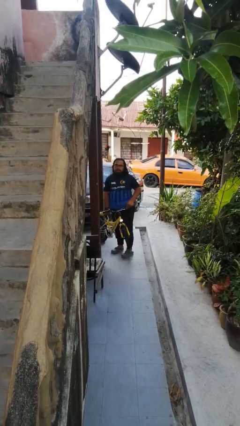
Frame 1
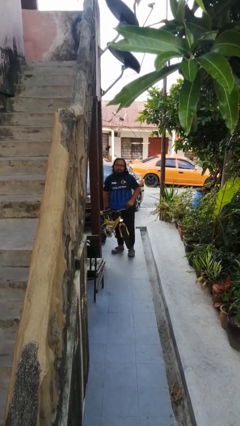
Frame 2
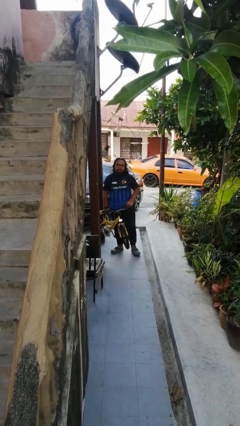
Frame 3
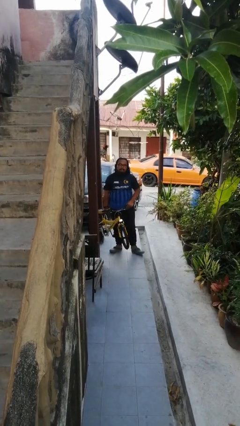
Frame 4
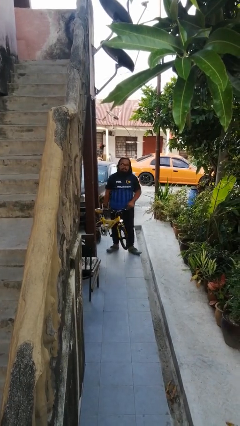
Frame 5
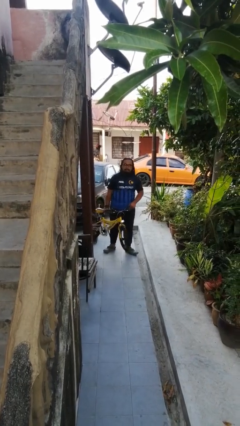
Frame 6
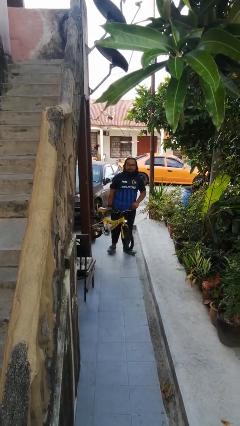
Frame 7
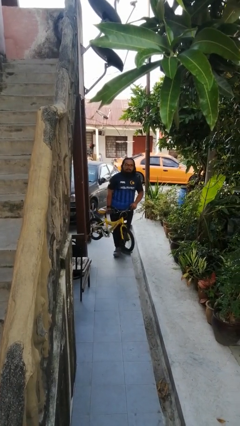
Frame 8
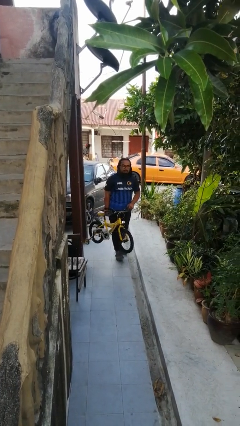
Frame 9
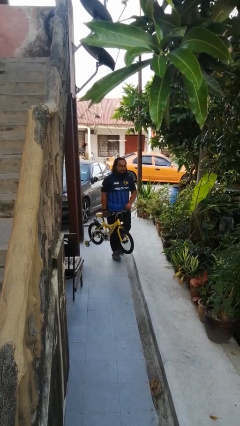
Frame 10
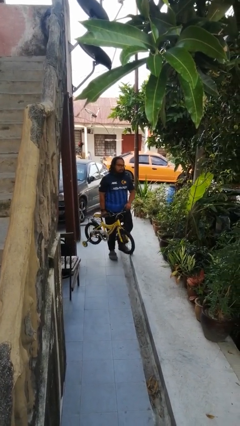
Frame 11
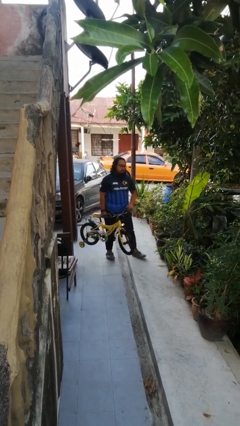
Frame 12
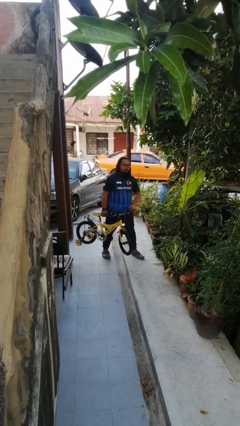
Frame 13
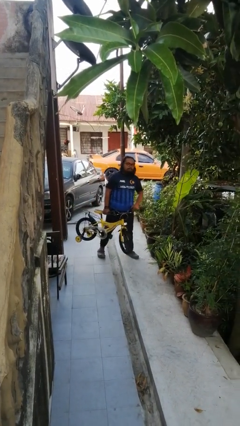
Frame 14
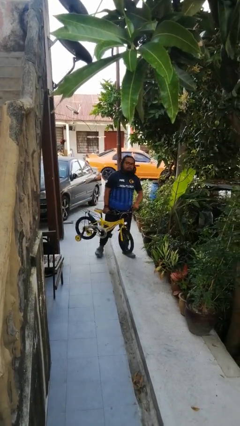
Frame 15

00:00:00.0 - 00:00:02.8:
person carries bicycle

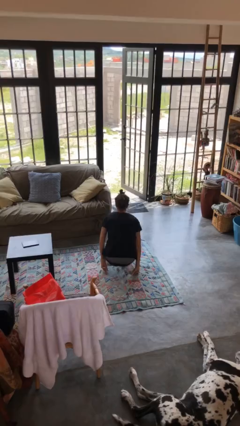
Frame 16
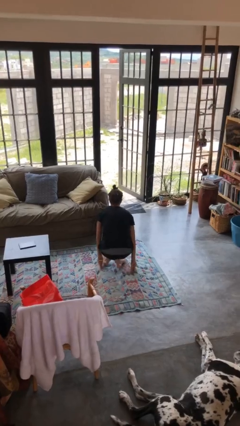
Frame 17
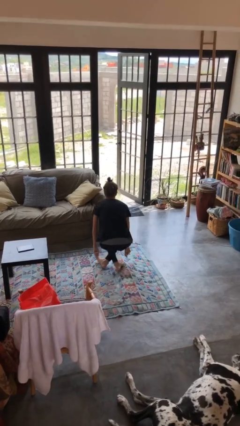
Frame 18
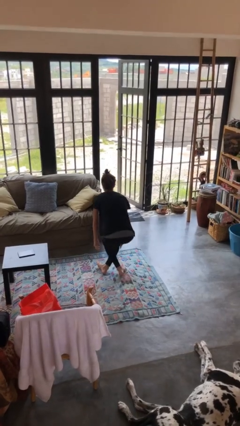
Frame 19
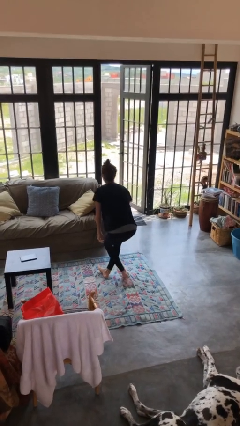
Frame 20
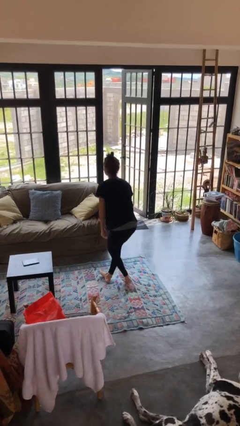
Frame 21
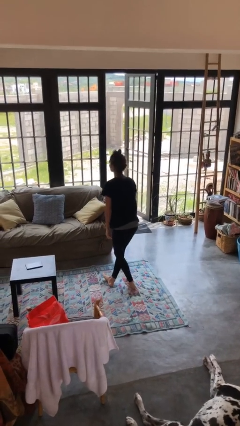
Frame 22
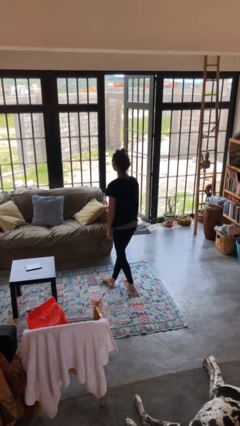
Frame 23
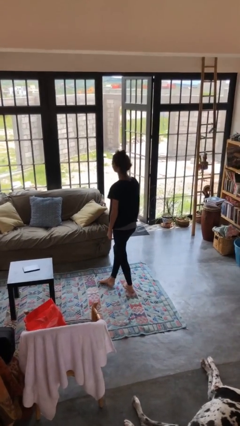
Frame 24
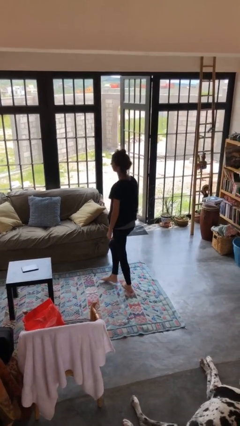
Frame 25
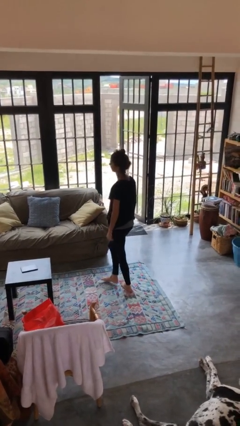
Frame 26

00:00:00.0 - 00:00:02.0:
person stands up from floor

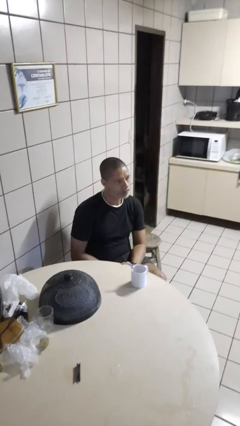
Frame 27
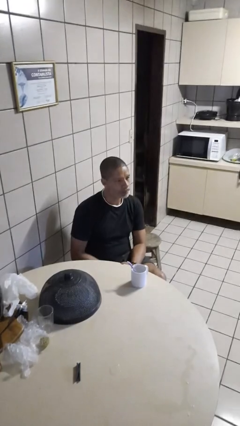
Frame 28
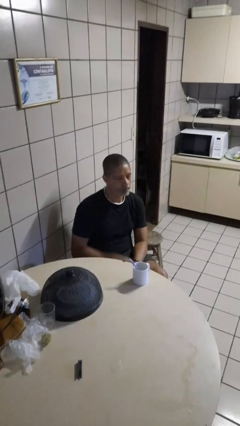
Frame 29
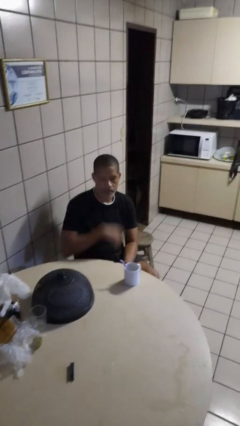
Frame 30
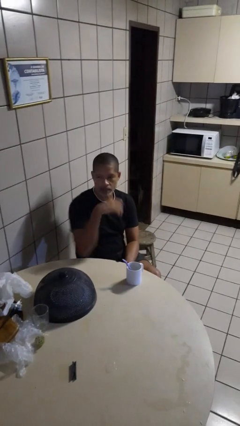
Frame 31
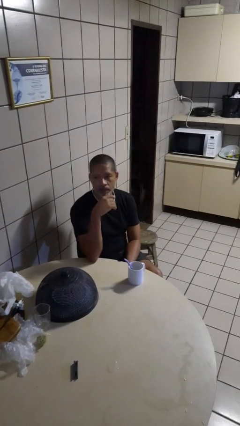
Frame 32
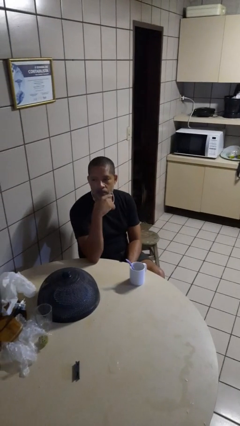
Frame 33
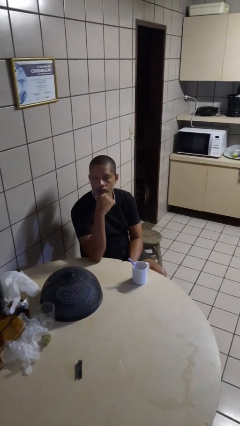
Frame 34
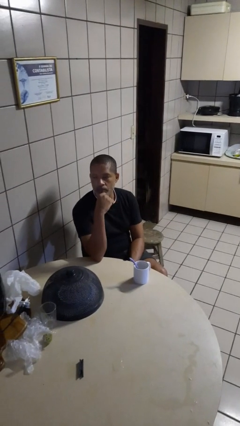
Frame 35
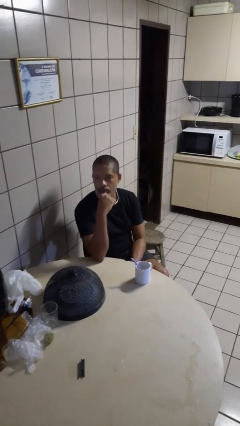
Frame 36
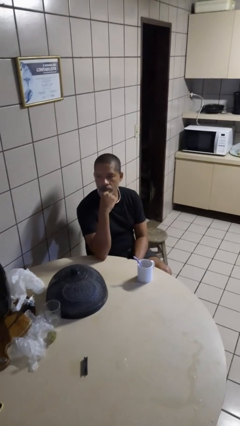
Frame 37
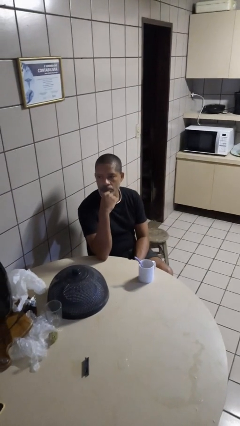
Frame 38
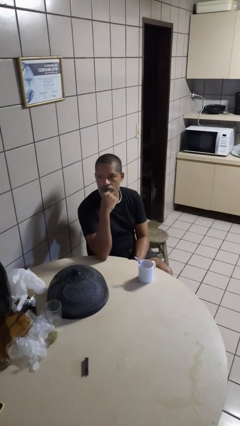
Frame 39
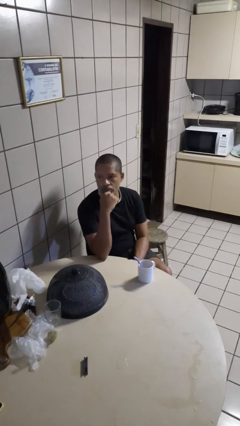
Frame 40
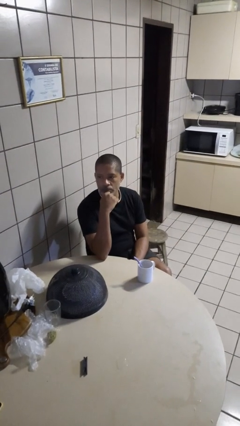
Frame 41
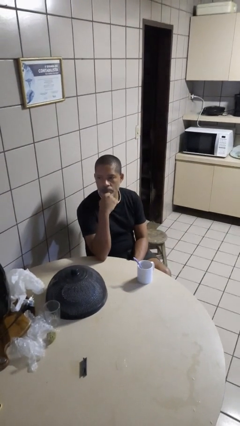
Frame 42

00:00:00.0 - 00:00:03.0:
person strokes chin

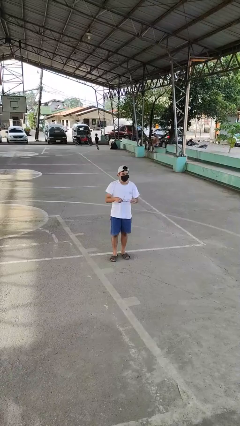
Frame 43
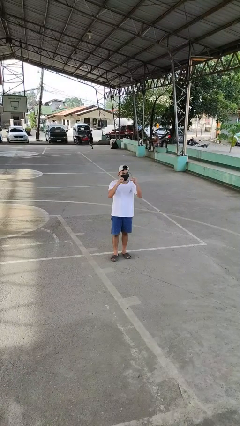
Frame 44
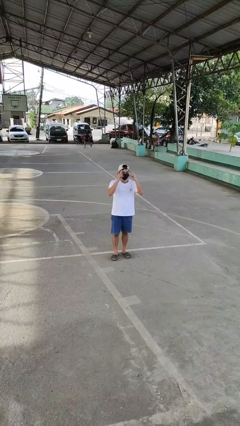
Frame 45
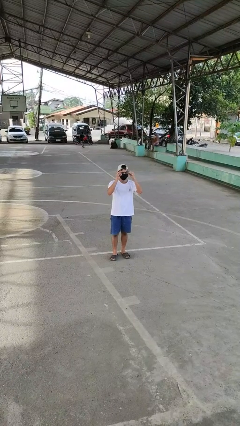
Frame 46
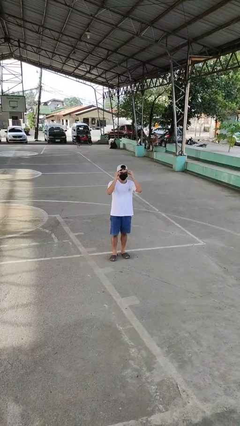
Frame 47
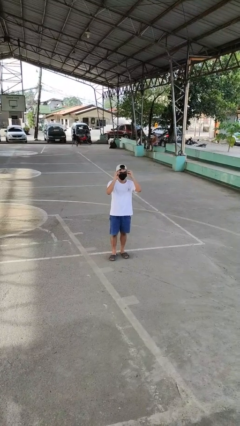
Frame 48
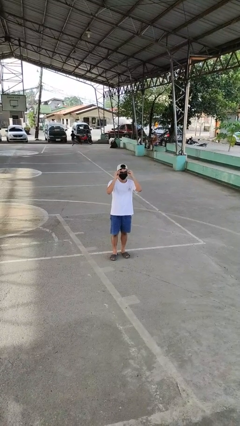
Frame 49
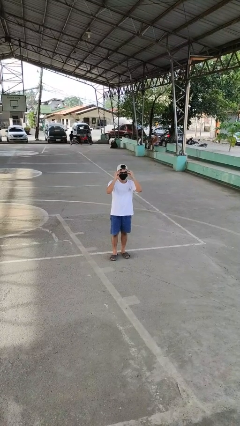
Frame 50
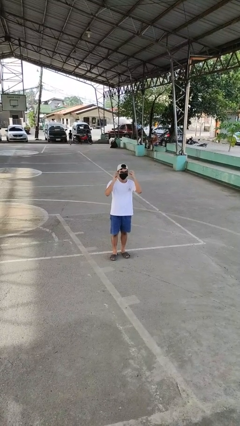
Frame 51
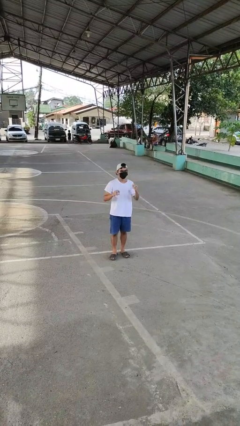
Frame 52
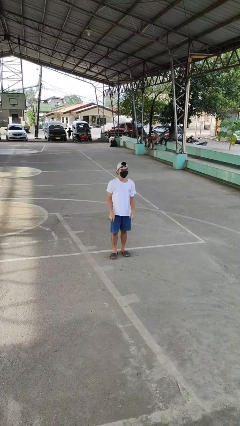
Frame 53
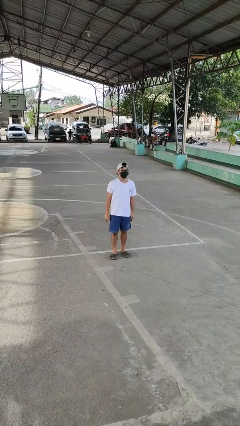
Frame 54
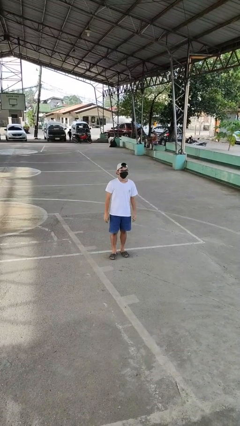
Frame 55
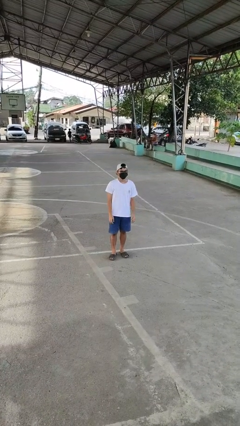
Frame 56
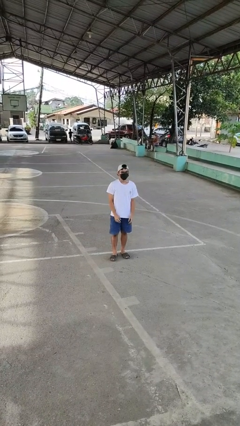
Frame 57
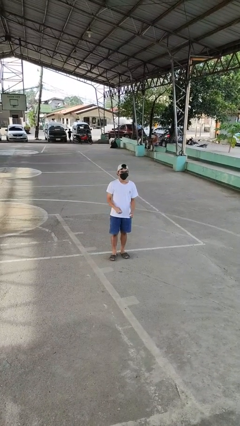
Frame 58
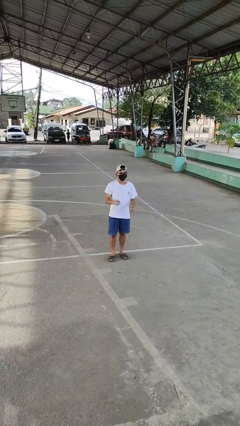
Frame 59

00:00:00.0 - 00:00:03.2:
person puts on glasses

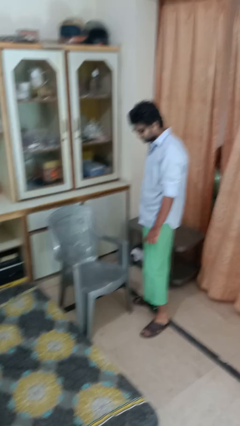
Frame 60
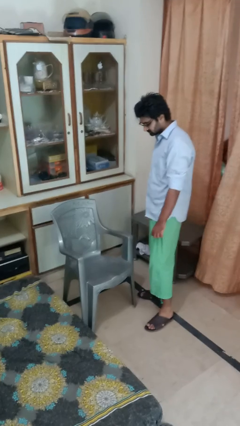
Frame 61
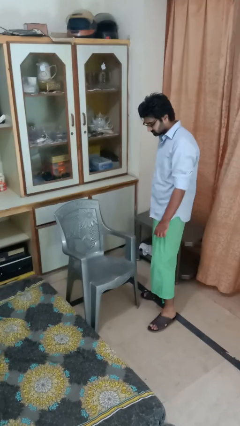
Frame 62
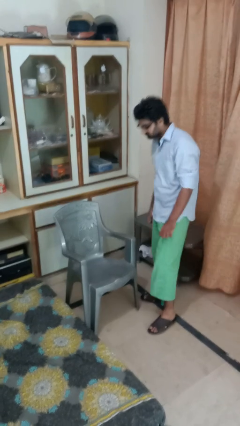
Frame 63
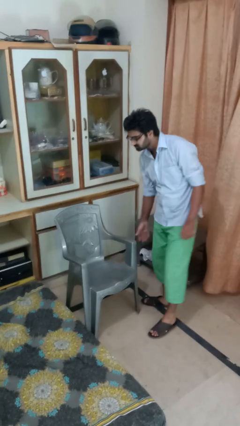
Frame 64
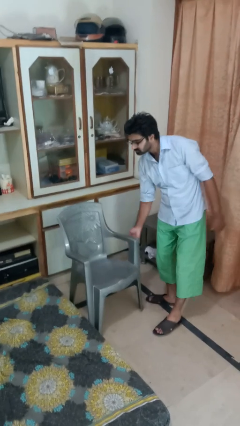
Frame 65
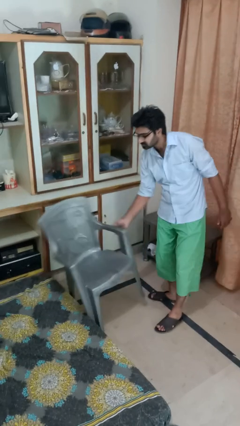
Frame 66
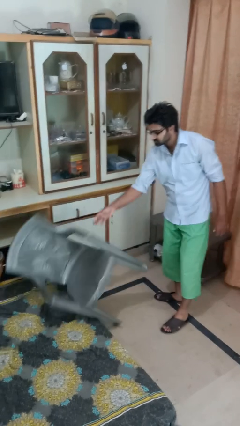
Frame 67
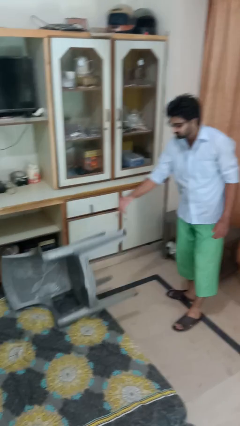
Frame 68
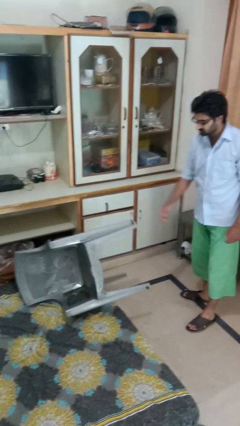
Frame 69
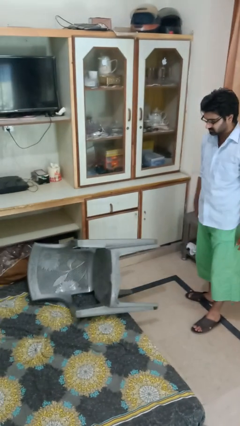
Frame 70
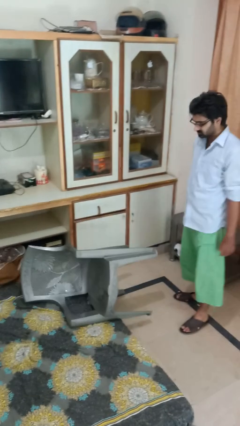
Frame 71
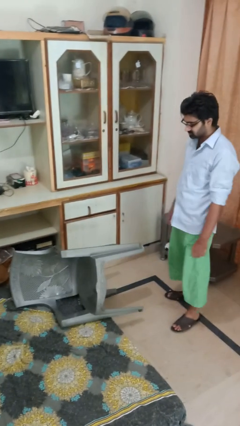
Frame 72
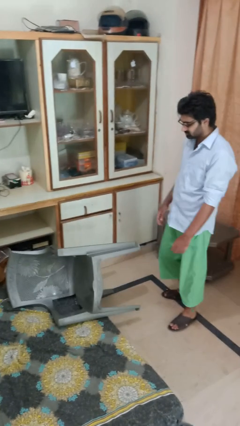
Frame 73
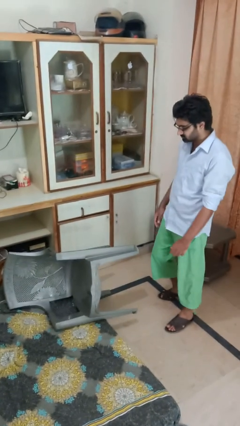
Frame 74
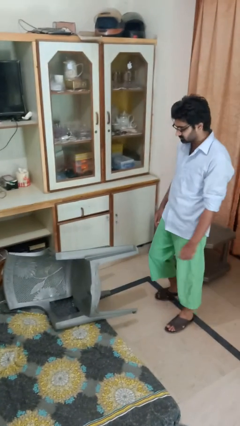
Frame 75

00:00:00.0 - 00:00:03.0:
person knocks over furniture

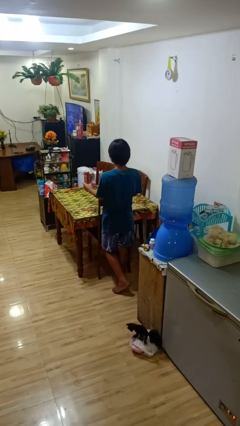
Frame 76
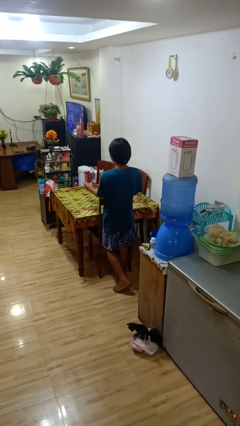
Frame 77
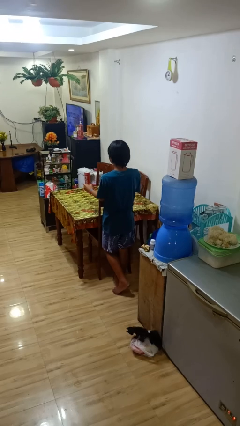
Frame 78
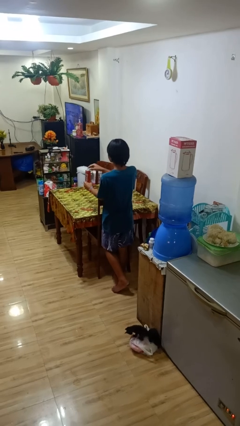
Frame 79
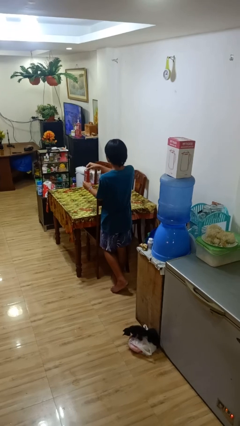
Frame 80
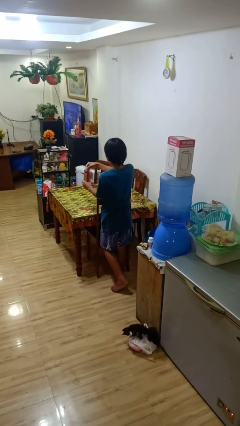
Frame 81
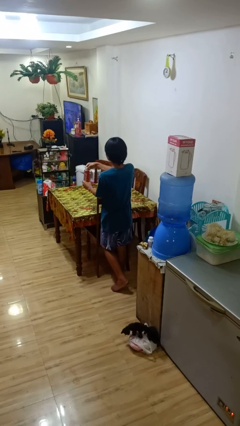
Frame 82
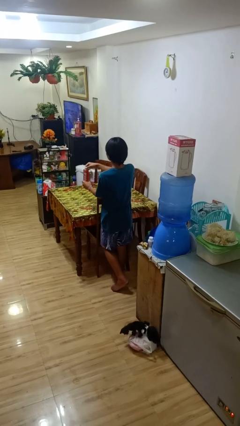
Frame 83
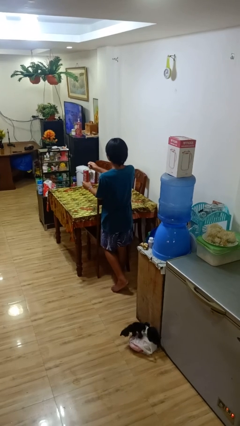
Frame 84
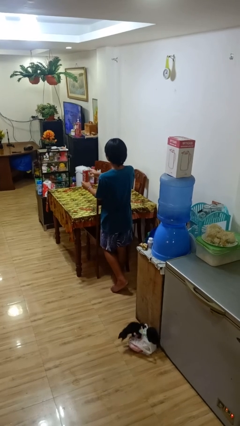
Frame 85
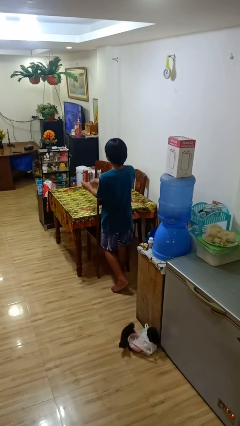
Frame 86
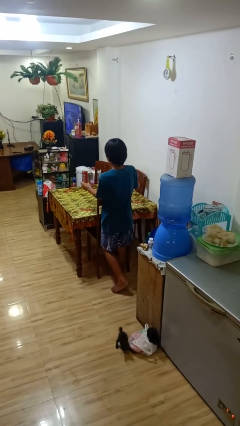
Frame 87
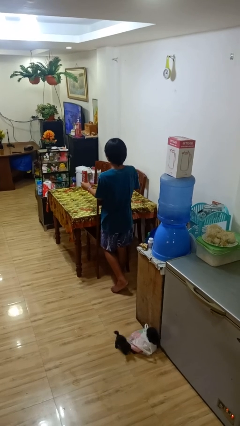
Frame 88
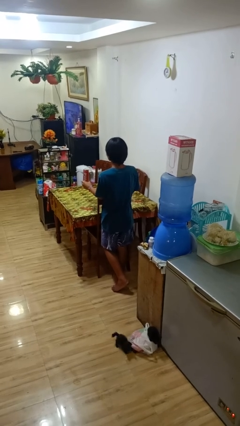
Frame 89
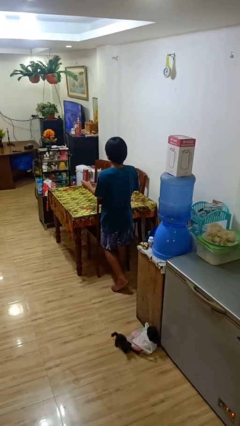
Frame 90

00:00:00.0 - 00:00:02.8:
person opens beverage can

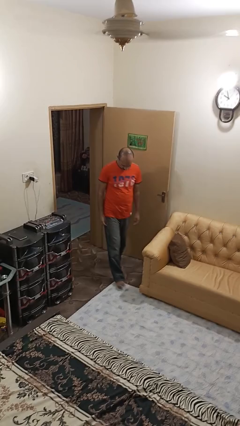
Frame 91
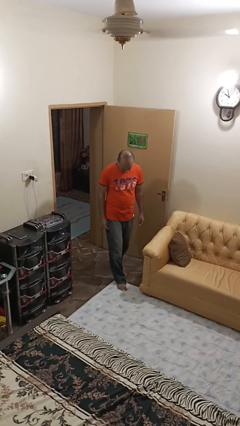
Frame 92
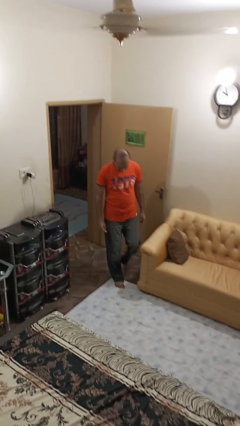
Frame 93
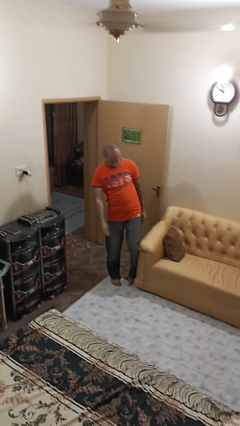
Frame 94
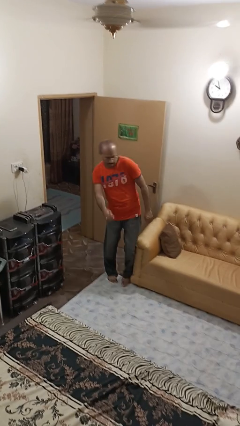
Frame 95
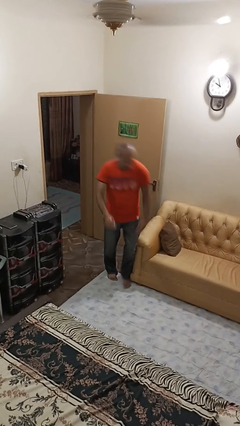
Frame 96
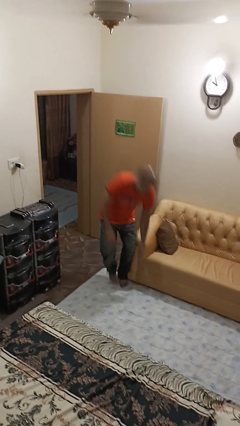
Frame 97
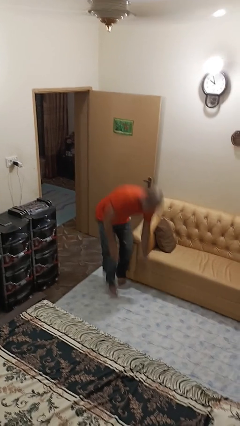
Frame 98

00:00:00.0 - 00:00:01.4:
person trips on object on floor
